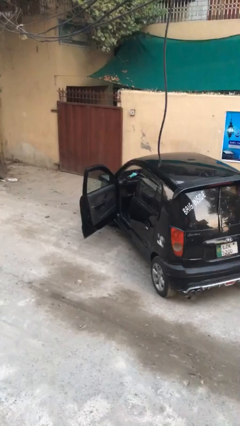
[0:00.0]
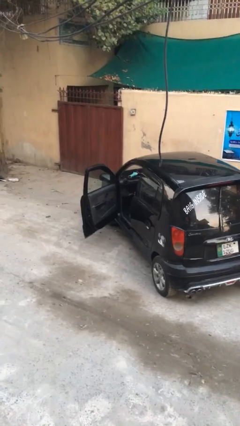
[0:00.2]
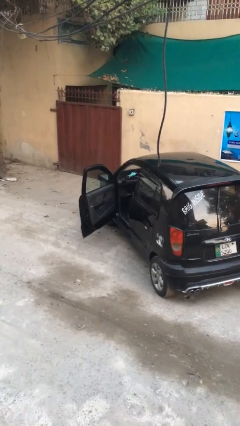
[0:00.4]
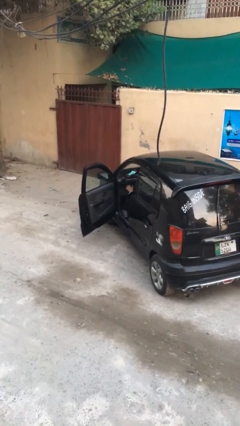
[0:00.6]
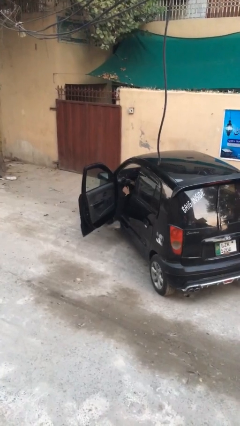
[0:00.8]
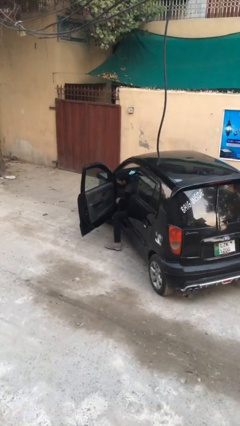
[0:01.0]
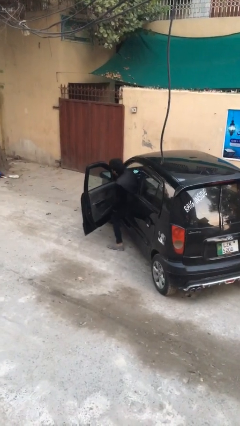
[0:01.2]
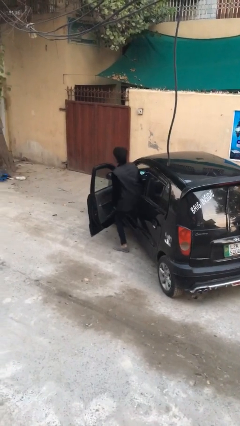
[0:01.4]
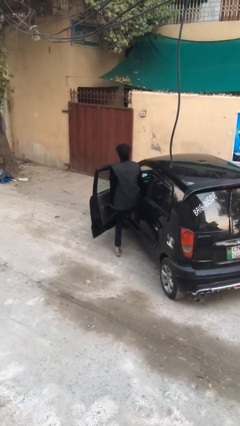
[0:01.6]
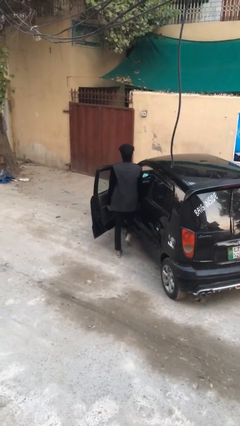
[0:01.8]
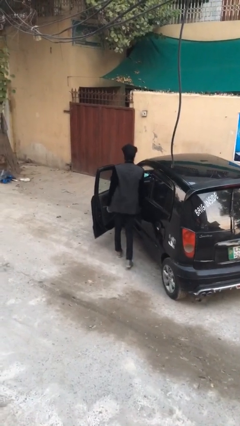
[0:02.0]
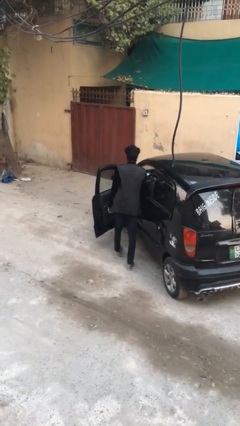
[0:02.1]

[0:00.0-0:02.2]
person exits car

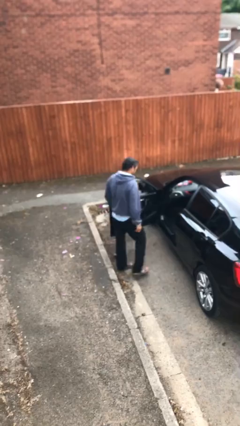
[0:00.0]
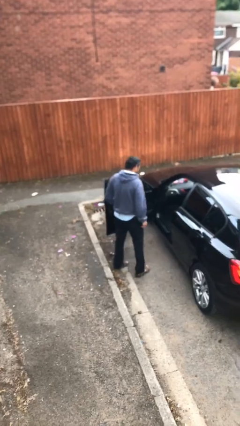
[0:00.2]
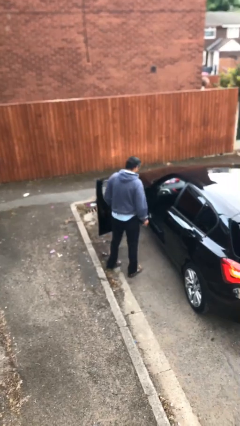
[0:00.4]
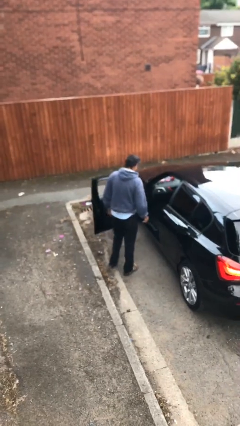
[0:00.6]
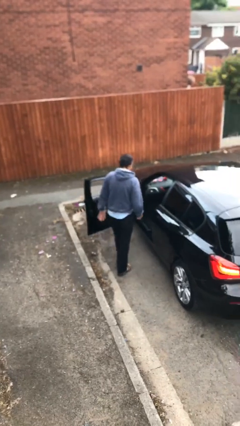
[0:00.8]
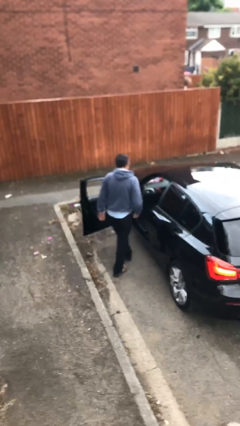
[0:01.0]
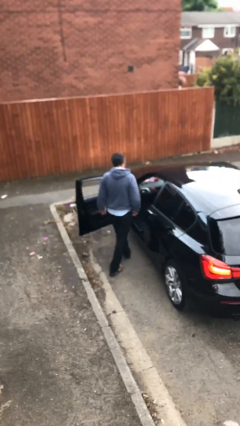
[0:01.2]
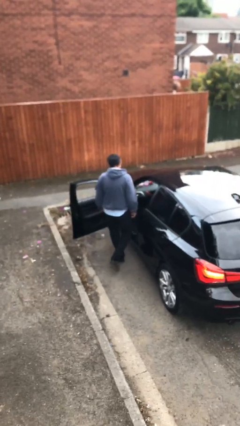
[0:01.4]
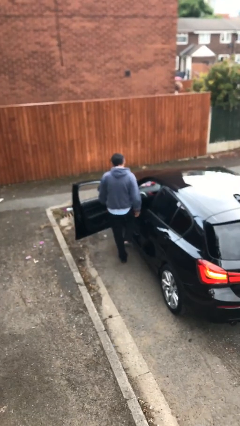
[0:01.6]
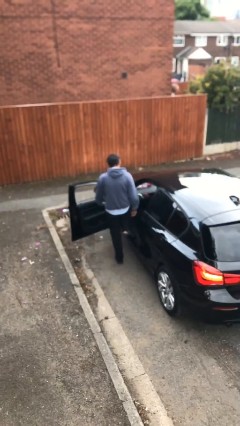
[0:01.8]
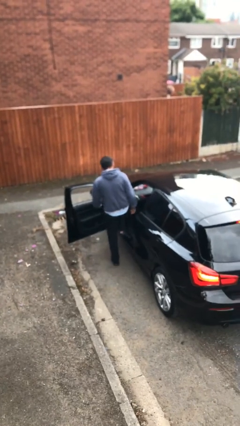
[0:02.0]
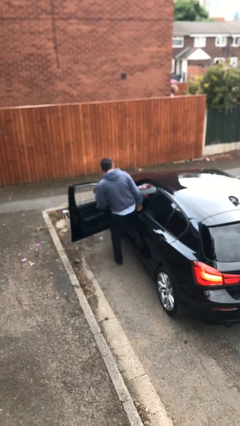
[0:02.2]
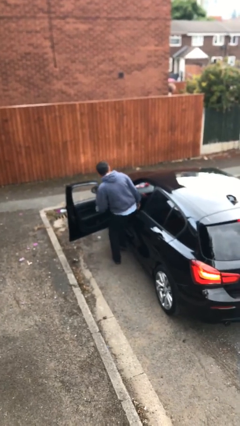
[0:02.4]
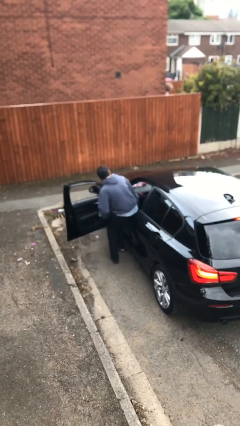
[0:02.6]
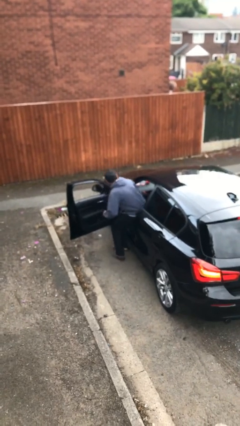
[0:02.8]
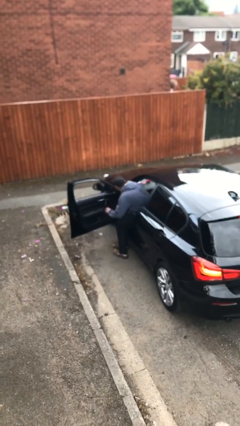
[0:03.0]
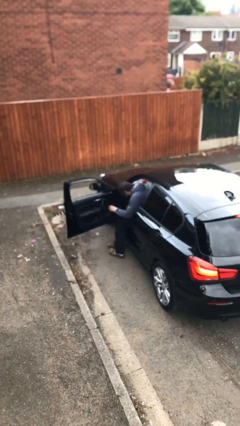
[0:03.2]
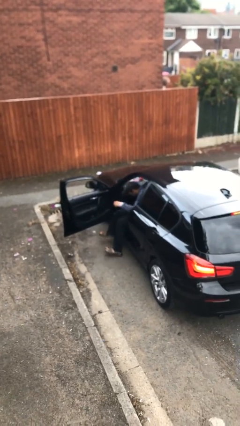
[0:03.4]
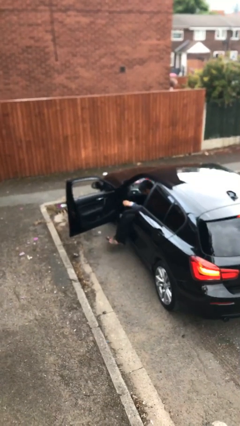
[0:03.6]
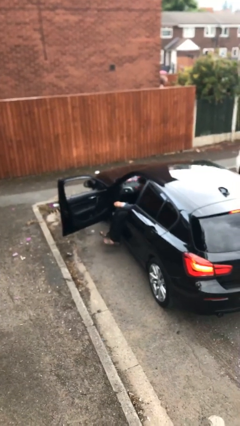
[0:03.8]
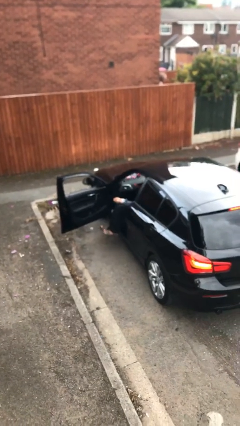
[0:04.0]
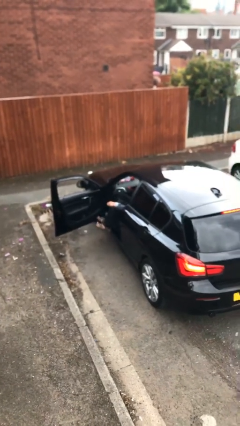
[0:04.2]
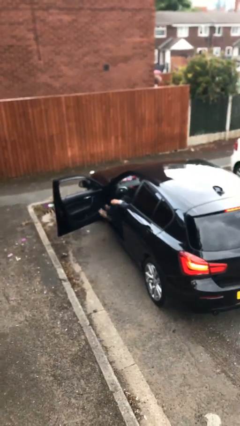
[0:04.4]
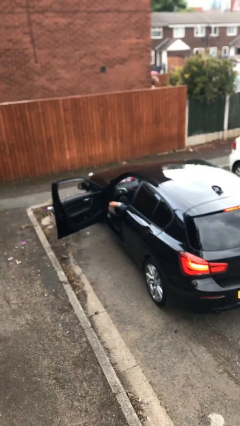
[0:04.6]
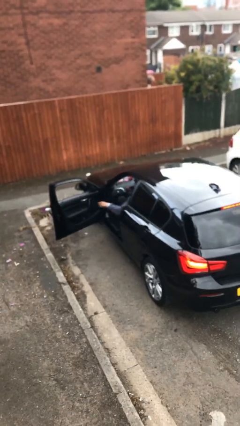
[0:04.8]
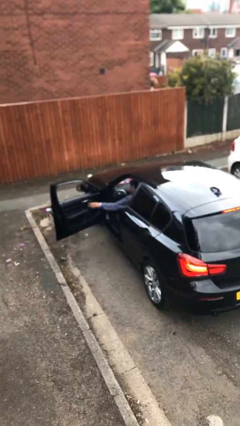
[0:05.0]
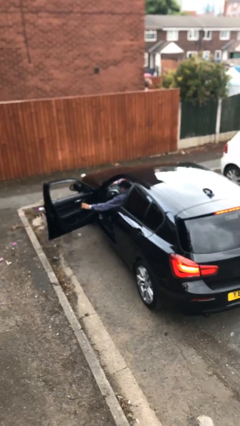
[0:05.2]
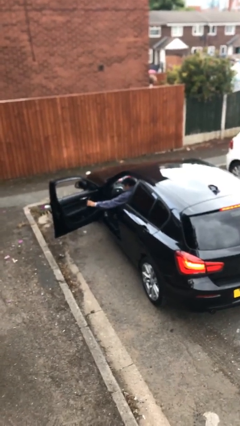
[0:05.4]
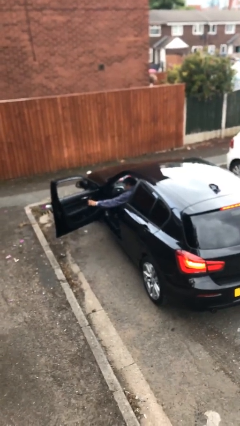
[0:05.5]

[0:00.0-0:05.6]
person enters car

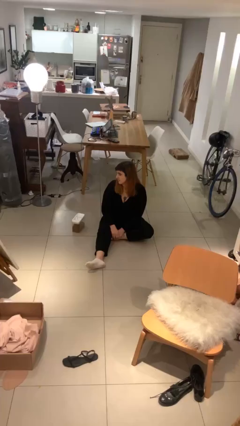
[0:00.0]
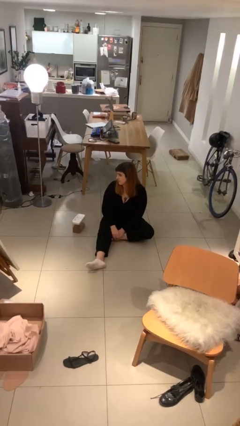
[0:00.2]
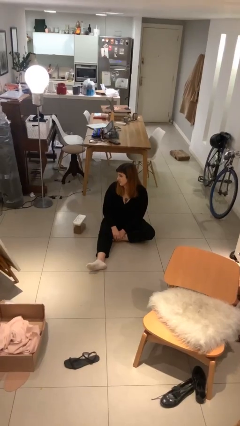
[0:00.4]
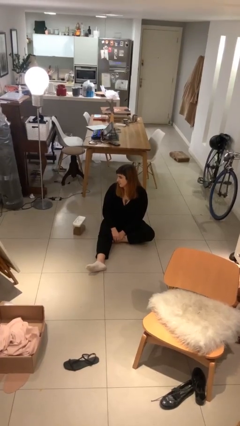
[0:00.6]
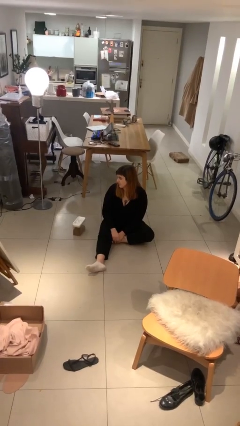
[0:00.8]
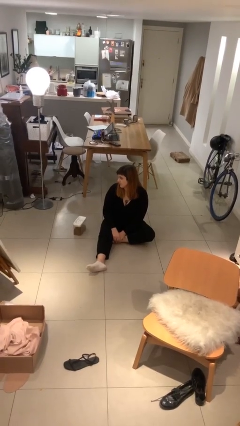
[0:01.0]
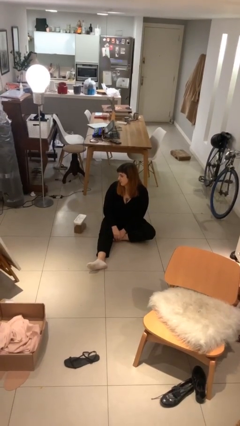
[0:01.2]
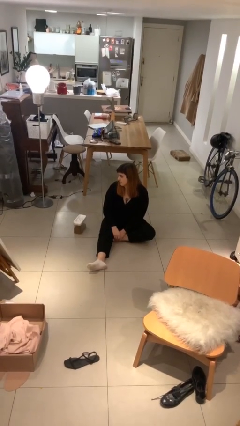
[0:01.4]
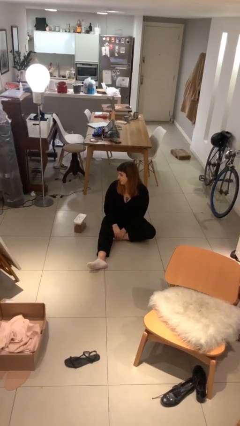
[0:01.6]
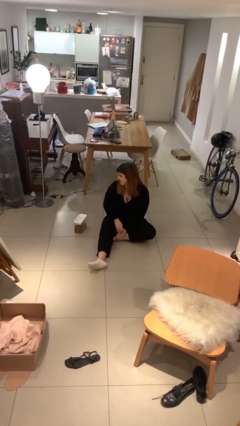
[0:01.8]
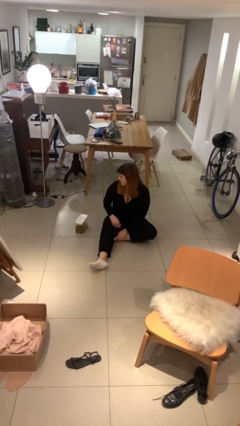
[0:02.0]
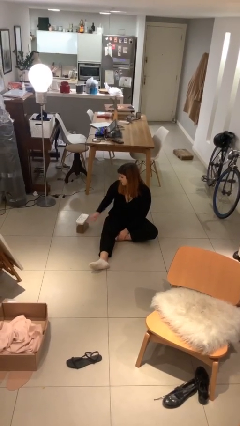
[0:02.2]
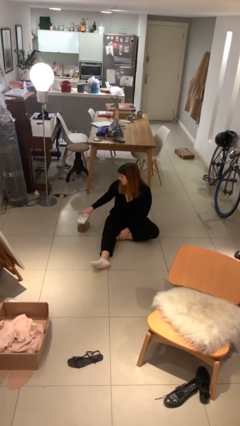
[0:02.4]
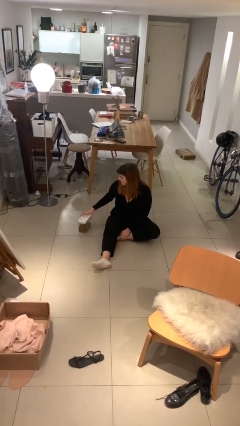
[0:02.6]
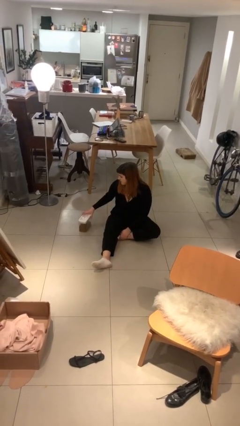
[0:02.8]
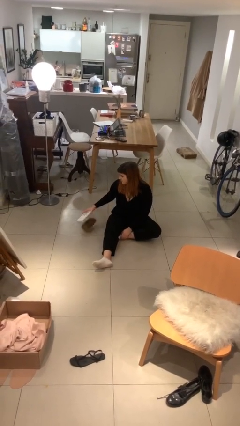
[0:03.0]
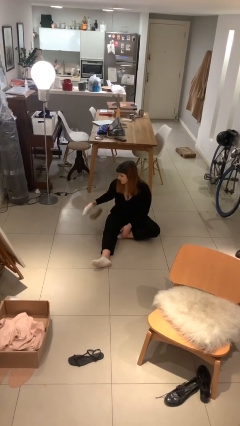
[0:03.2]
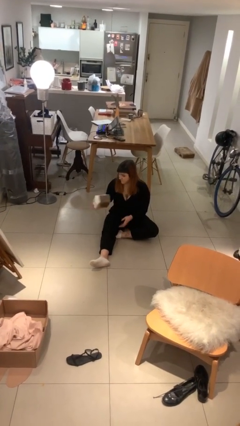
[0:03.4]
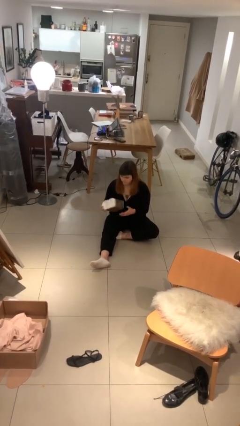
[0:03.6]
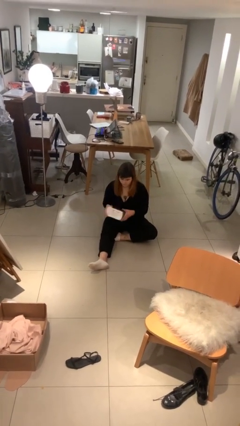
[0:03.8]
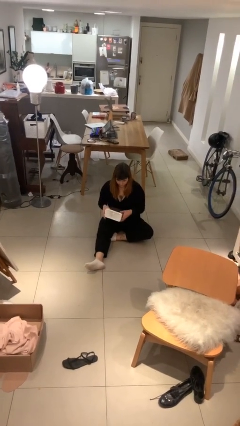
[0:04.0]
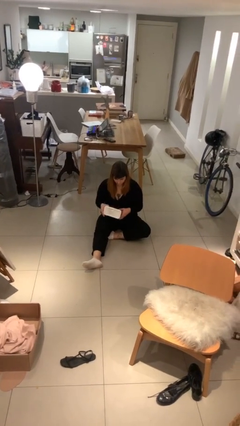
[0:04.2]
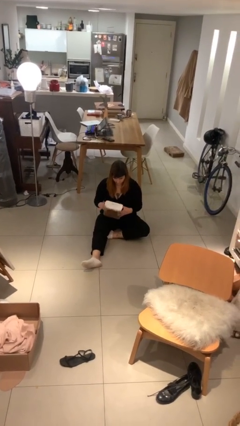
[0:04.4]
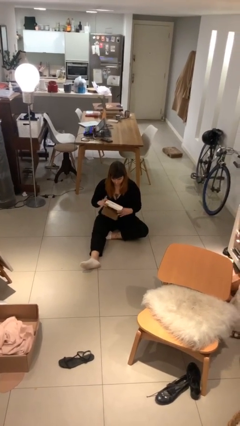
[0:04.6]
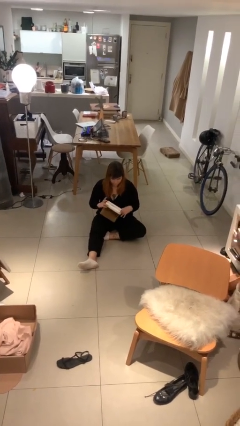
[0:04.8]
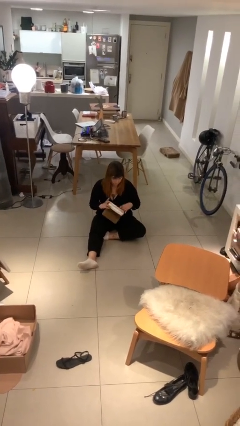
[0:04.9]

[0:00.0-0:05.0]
person picks up object from floor

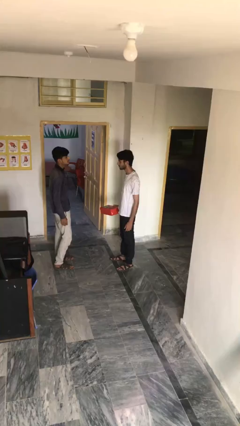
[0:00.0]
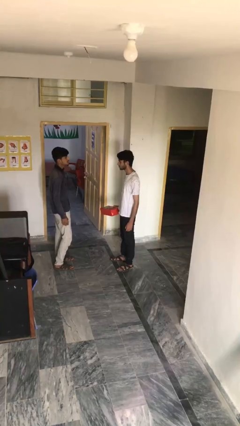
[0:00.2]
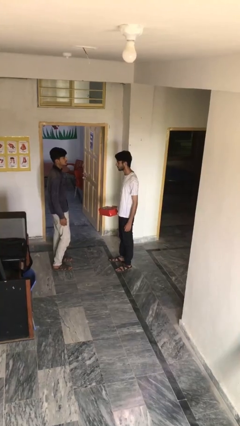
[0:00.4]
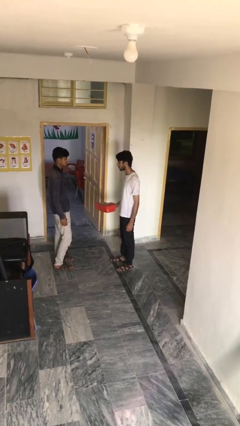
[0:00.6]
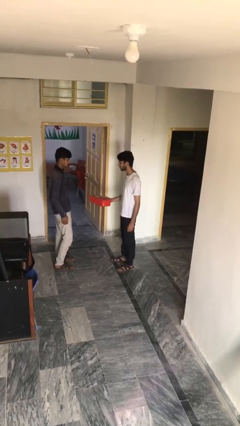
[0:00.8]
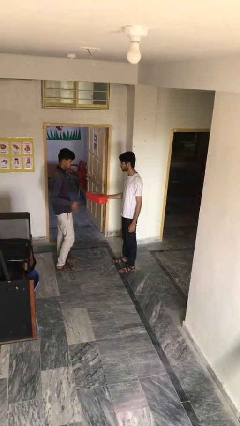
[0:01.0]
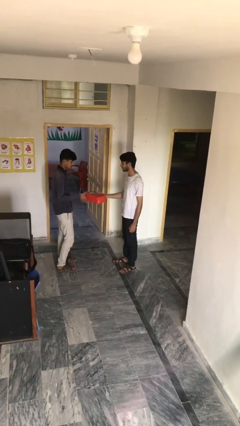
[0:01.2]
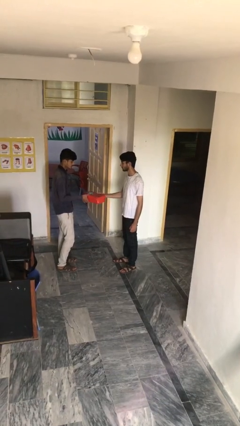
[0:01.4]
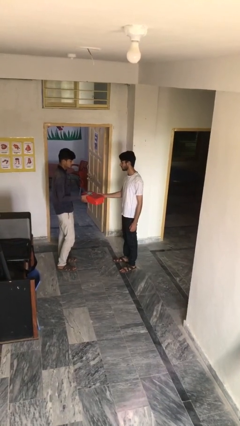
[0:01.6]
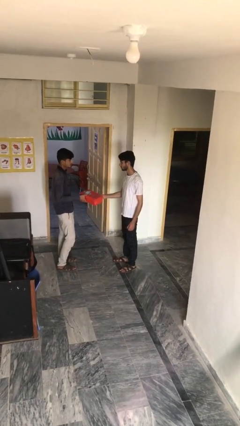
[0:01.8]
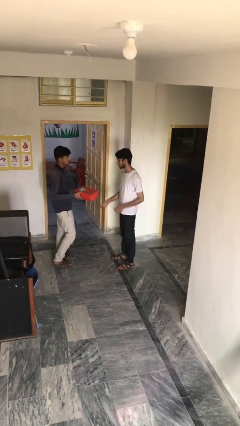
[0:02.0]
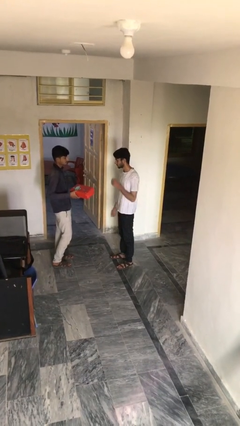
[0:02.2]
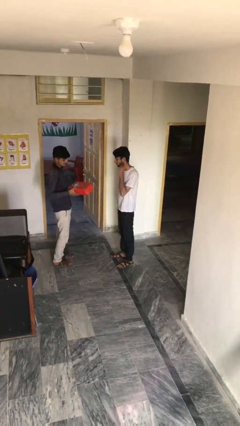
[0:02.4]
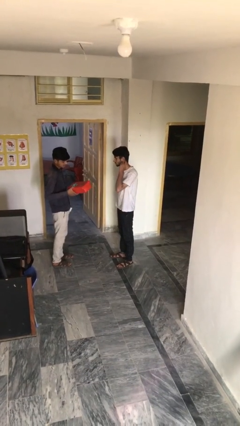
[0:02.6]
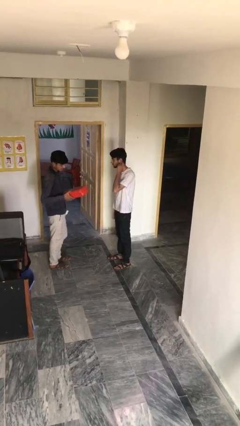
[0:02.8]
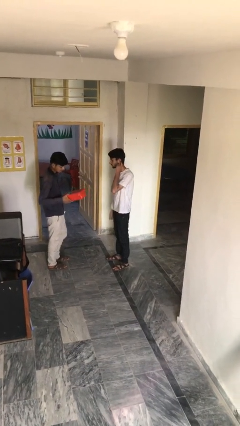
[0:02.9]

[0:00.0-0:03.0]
person transfers object to person

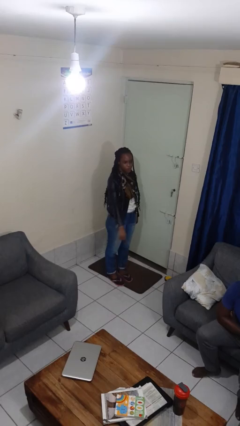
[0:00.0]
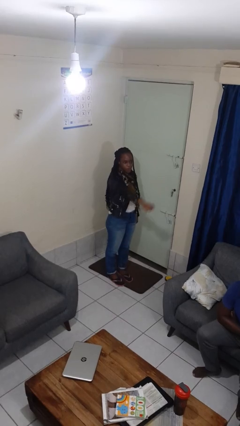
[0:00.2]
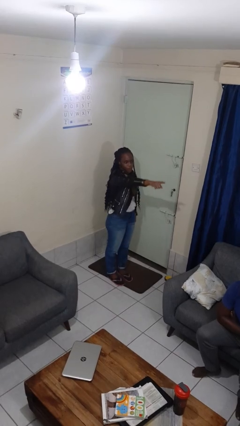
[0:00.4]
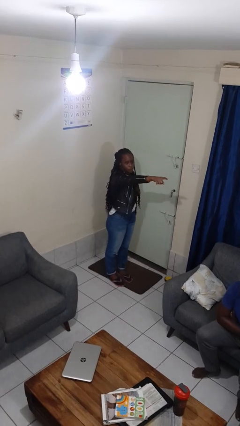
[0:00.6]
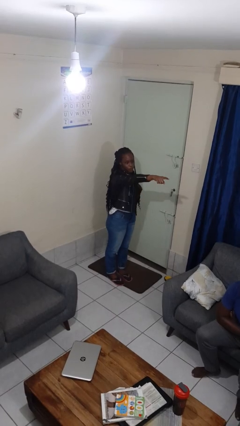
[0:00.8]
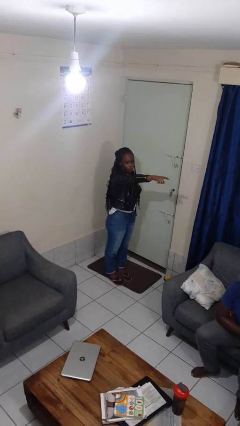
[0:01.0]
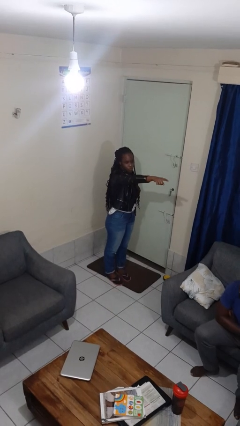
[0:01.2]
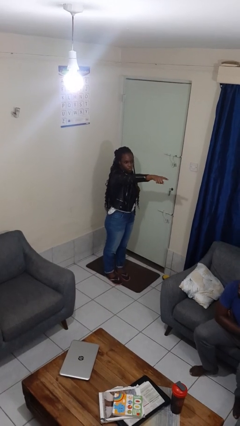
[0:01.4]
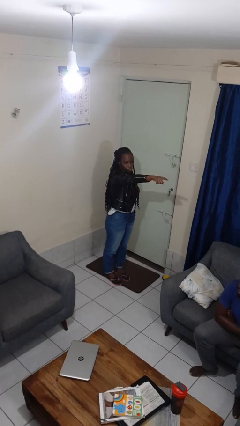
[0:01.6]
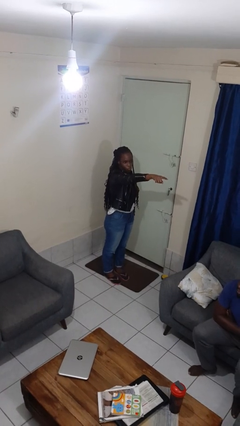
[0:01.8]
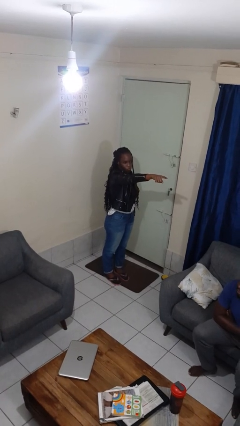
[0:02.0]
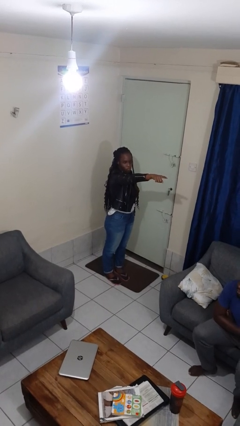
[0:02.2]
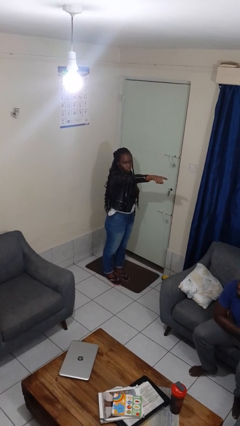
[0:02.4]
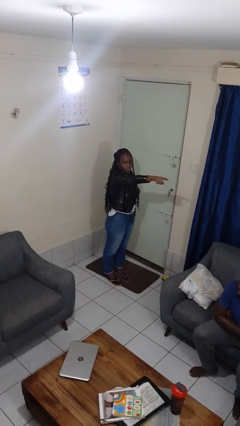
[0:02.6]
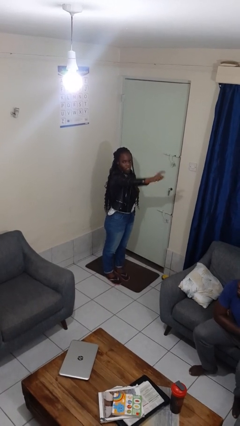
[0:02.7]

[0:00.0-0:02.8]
person points at person
